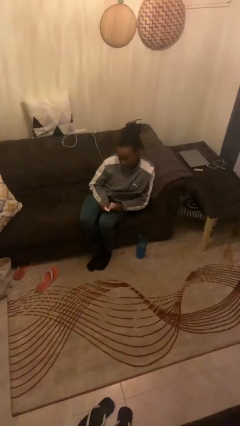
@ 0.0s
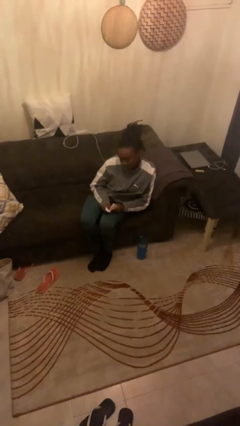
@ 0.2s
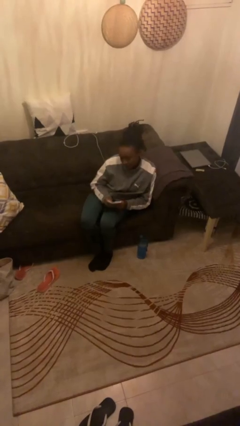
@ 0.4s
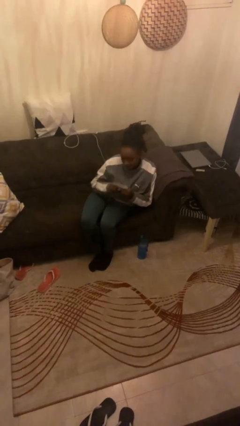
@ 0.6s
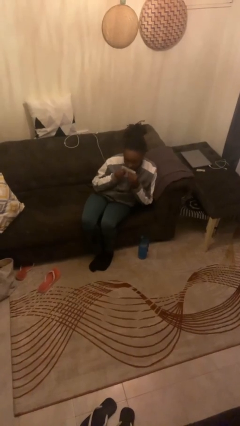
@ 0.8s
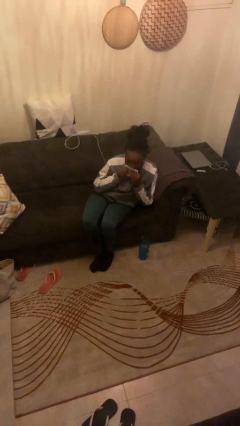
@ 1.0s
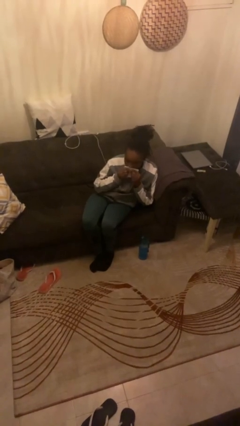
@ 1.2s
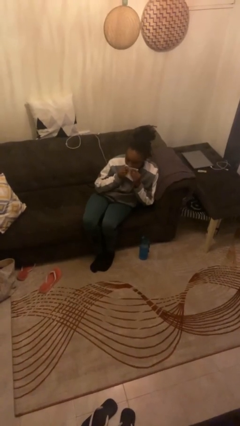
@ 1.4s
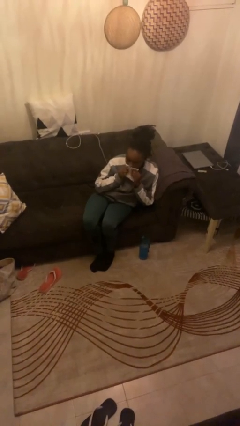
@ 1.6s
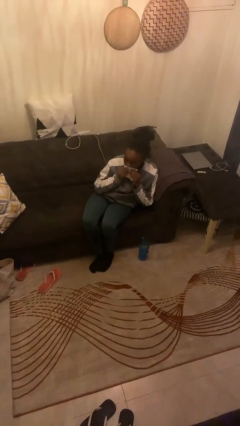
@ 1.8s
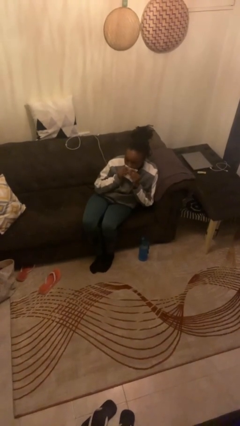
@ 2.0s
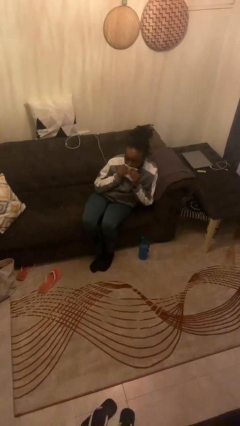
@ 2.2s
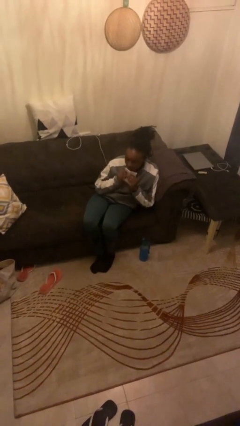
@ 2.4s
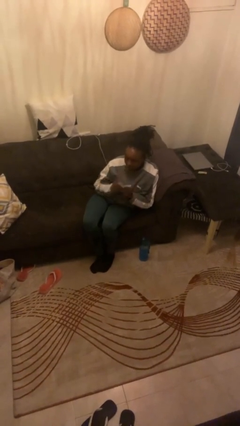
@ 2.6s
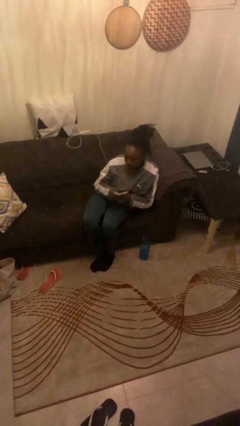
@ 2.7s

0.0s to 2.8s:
person wipes mouth with napkin

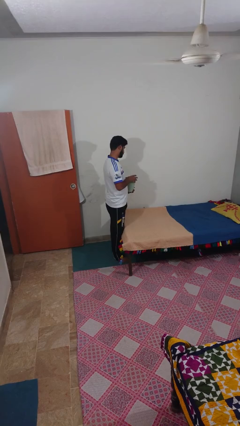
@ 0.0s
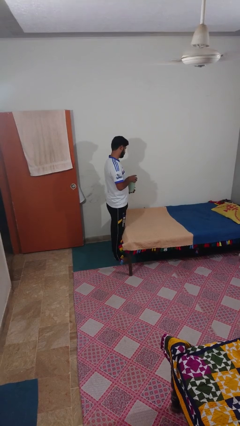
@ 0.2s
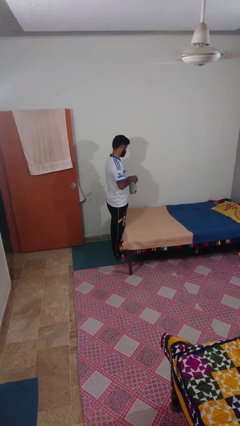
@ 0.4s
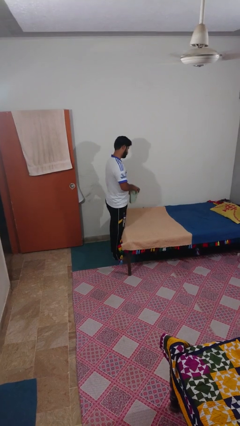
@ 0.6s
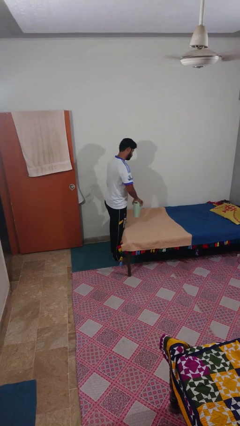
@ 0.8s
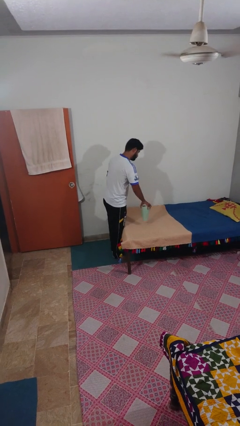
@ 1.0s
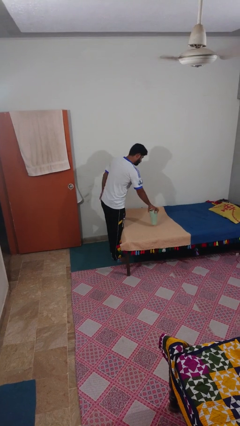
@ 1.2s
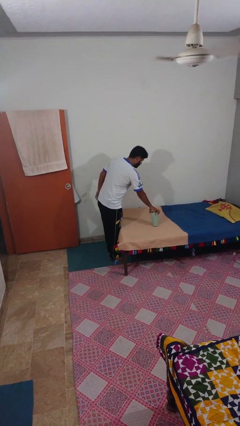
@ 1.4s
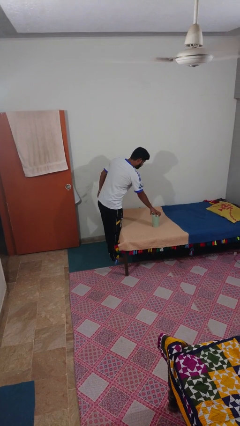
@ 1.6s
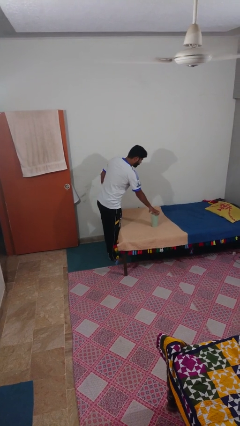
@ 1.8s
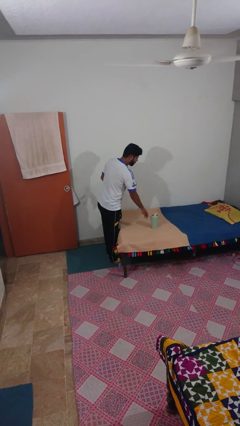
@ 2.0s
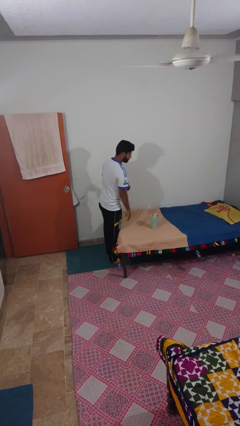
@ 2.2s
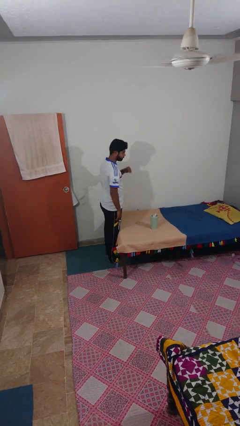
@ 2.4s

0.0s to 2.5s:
person puts down object on bed

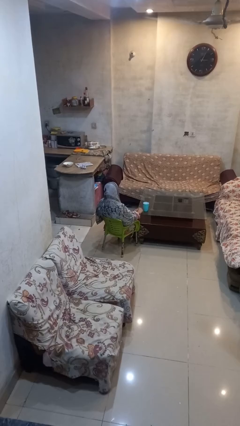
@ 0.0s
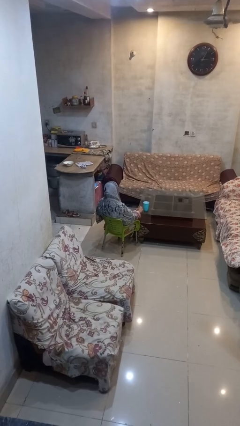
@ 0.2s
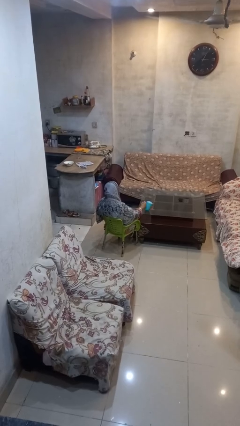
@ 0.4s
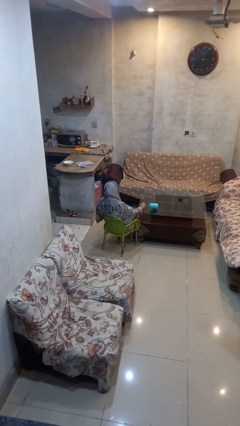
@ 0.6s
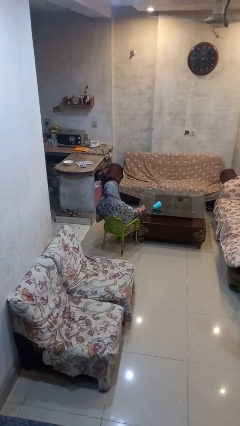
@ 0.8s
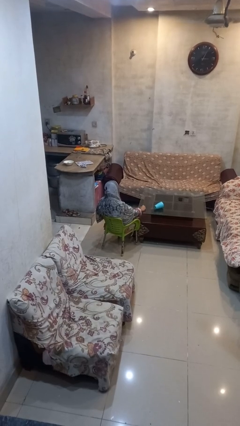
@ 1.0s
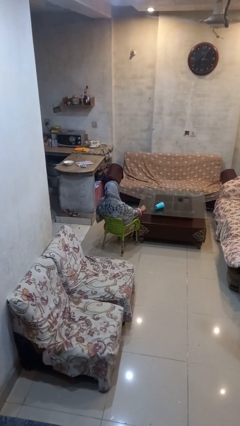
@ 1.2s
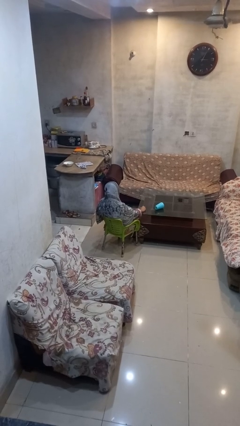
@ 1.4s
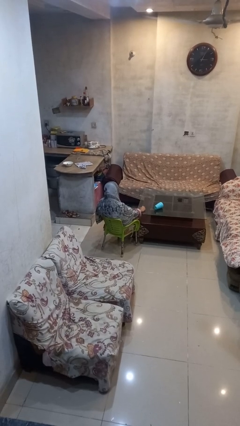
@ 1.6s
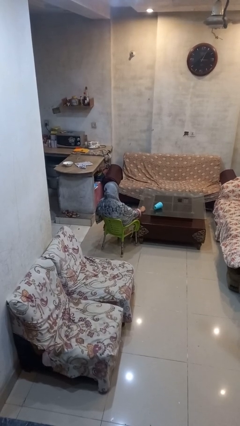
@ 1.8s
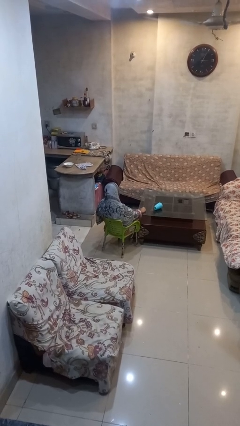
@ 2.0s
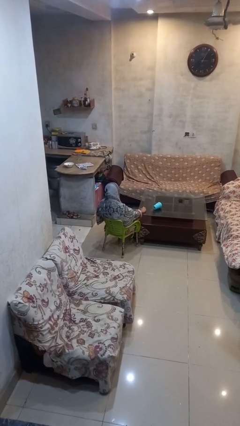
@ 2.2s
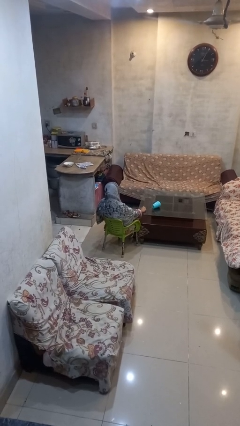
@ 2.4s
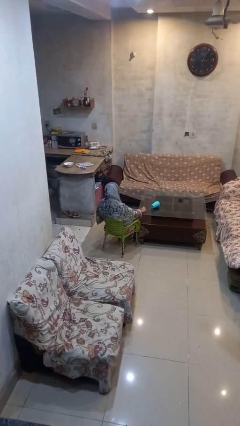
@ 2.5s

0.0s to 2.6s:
person knocks over glass

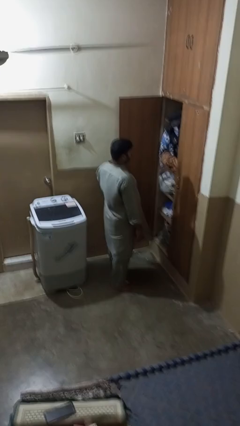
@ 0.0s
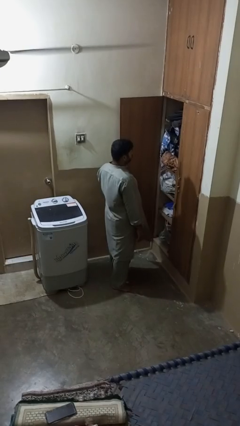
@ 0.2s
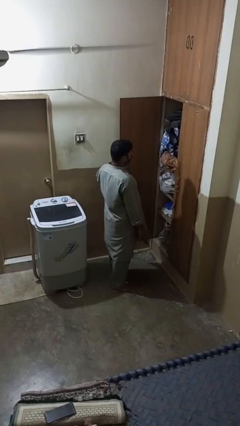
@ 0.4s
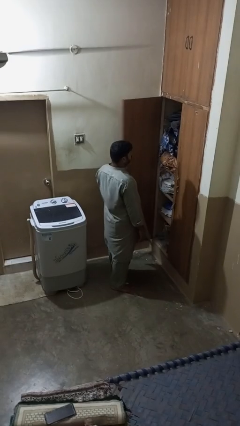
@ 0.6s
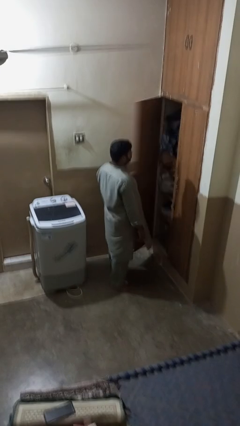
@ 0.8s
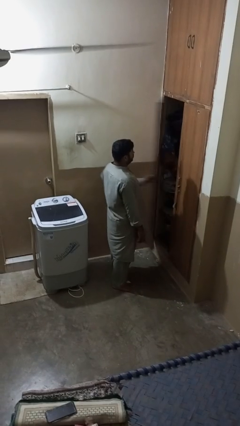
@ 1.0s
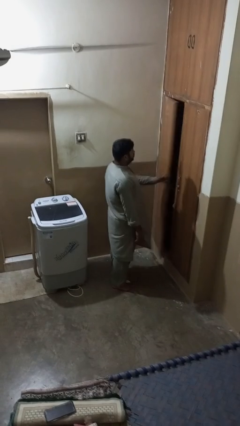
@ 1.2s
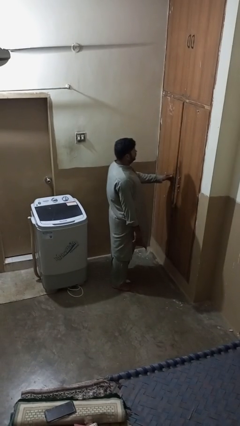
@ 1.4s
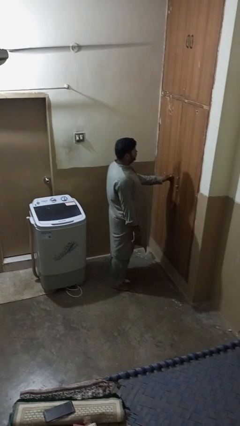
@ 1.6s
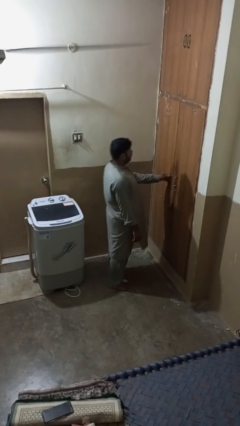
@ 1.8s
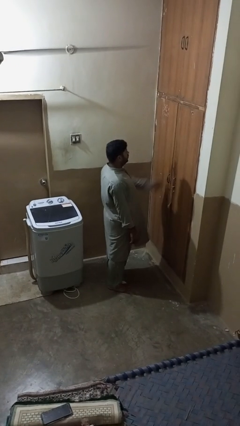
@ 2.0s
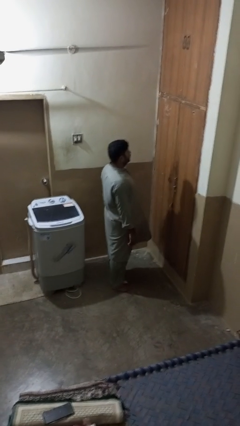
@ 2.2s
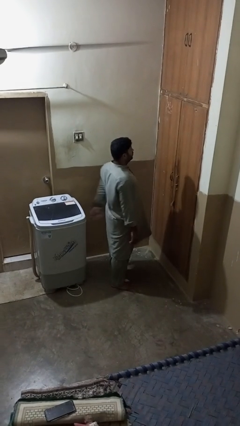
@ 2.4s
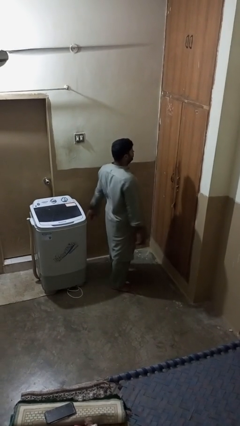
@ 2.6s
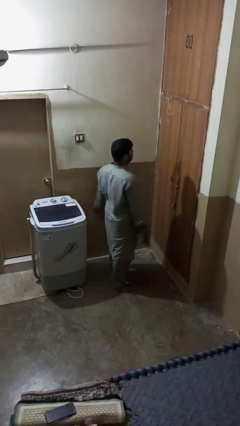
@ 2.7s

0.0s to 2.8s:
person closes closet door

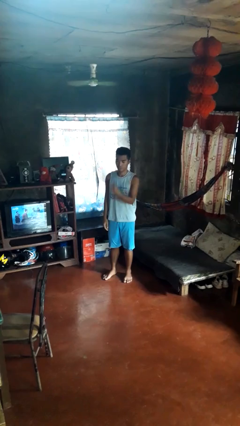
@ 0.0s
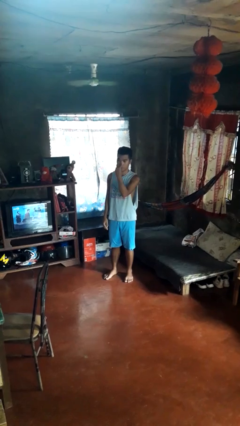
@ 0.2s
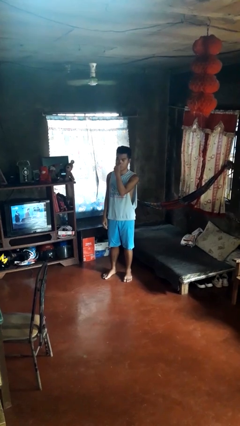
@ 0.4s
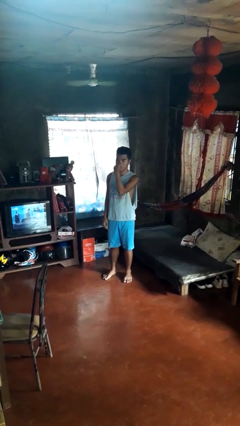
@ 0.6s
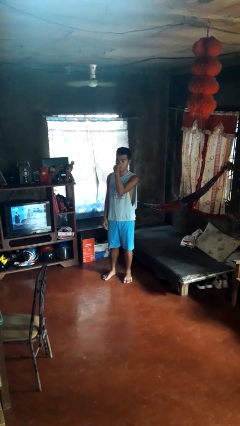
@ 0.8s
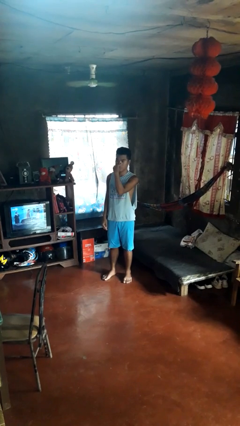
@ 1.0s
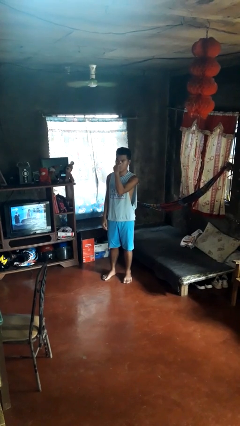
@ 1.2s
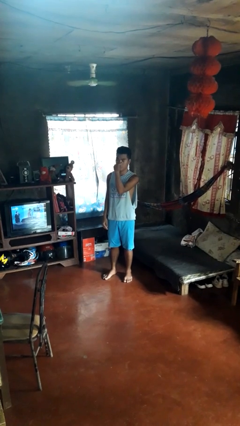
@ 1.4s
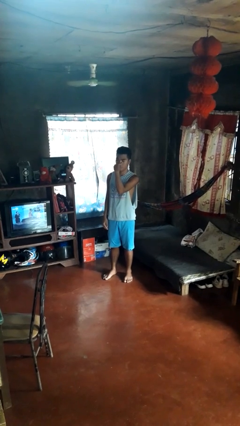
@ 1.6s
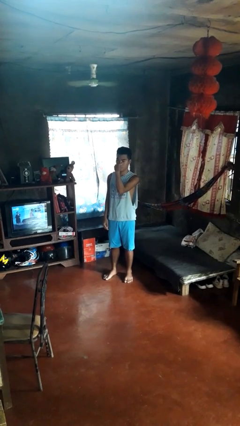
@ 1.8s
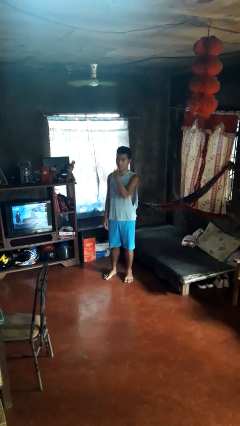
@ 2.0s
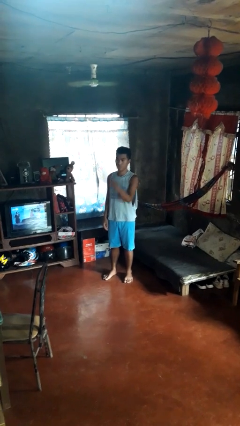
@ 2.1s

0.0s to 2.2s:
person gestures watch closely

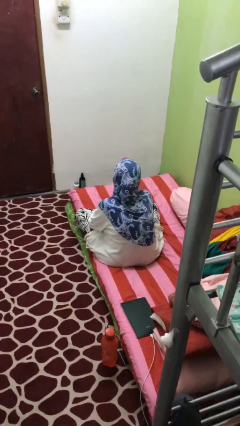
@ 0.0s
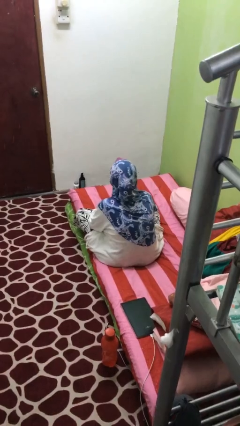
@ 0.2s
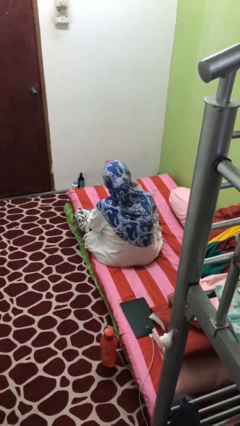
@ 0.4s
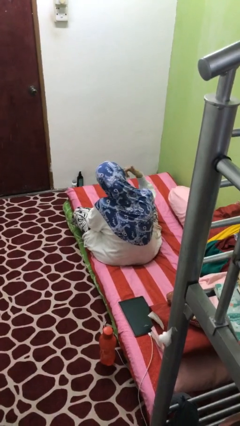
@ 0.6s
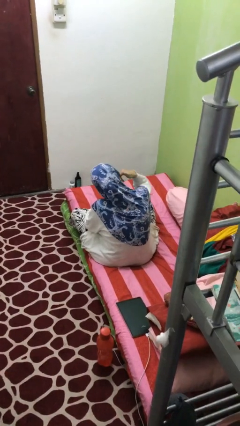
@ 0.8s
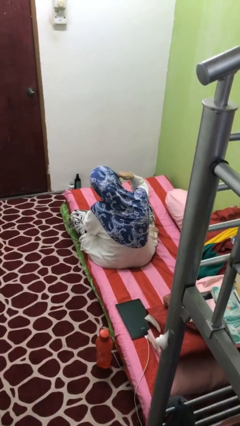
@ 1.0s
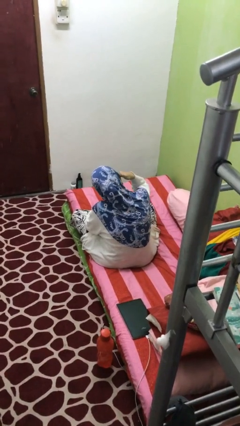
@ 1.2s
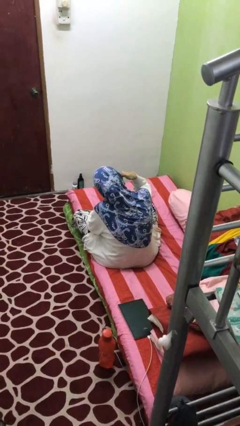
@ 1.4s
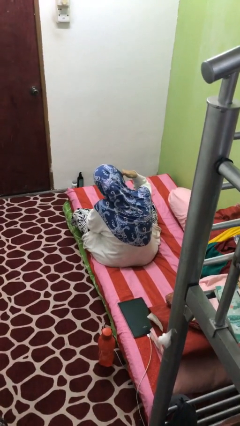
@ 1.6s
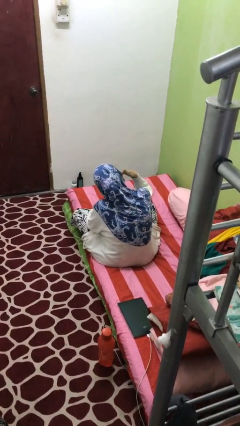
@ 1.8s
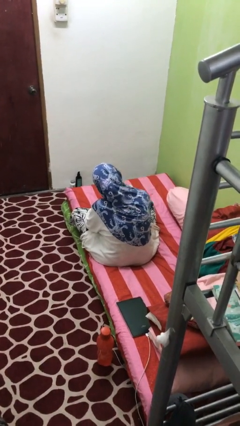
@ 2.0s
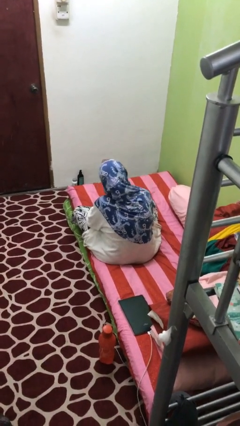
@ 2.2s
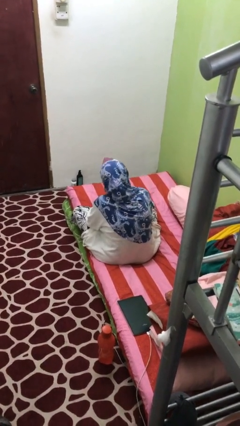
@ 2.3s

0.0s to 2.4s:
person gestures call me

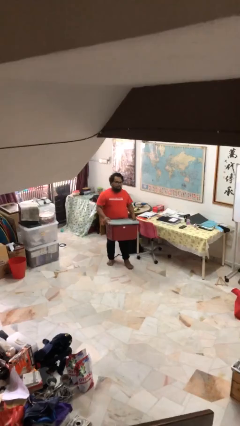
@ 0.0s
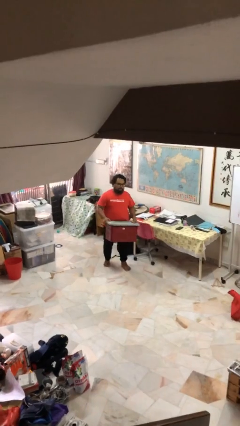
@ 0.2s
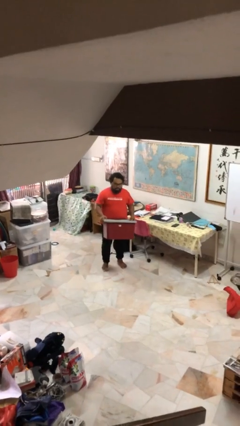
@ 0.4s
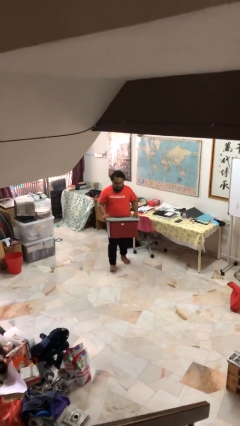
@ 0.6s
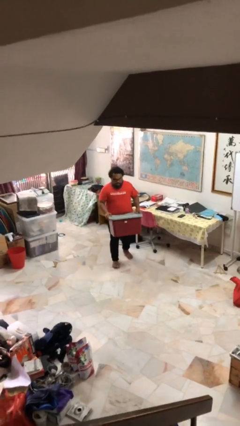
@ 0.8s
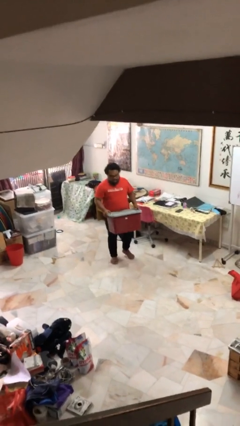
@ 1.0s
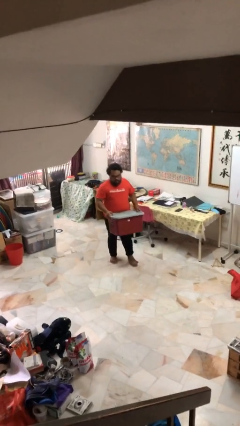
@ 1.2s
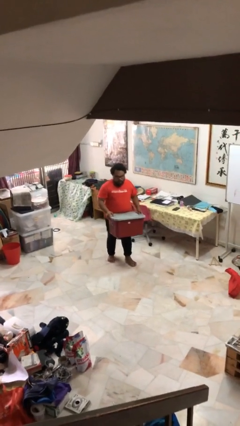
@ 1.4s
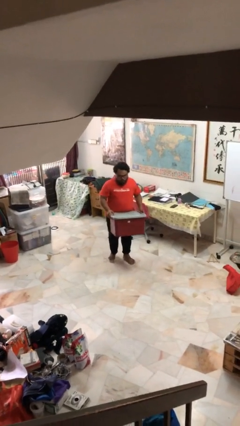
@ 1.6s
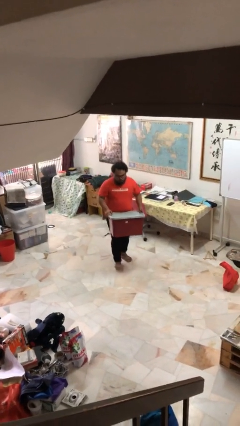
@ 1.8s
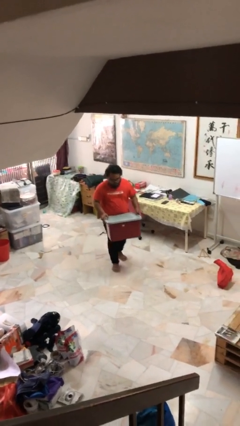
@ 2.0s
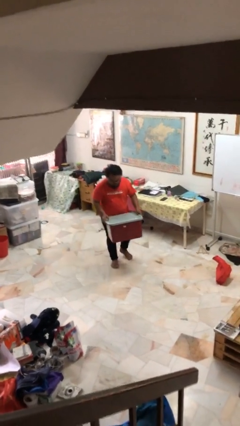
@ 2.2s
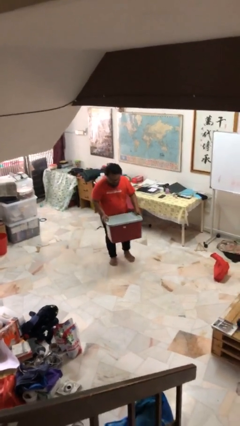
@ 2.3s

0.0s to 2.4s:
person carries heavy object
